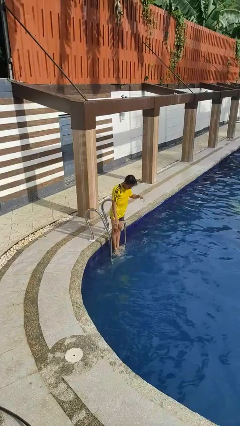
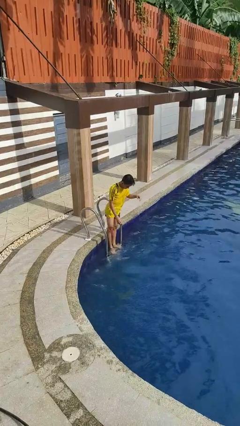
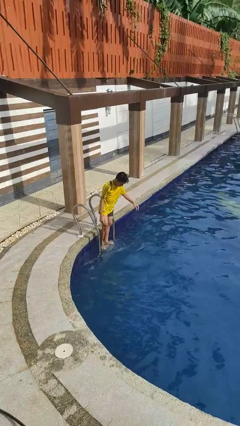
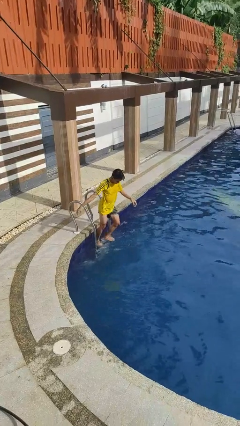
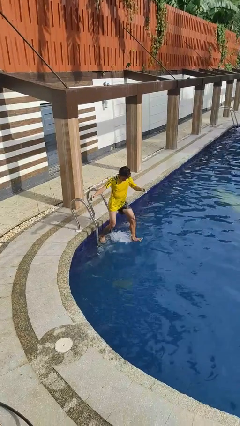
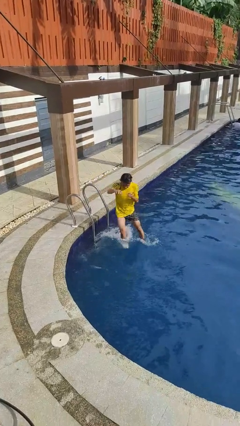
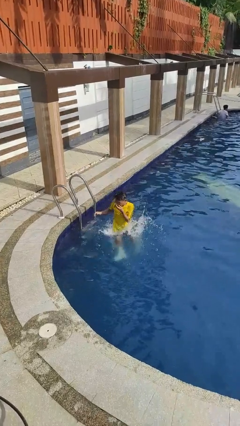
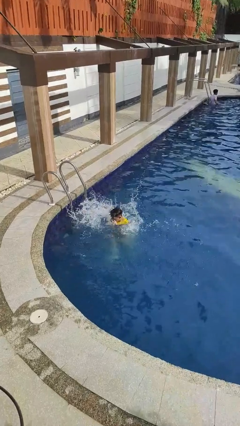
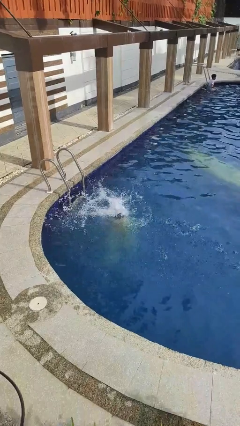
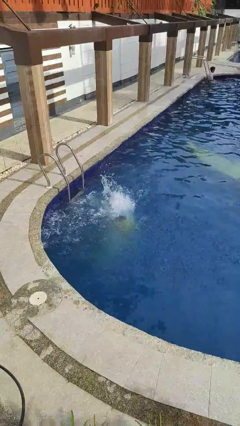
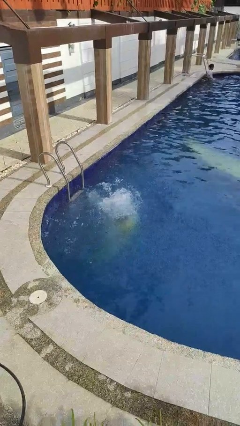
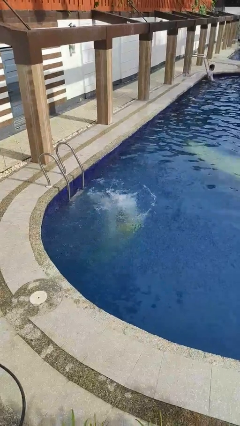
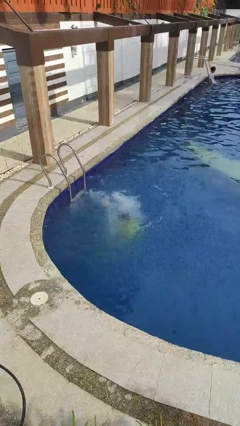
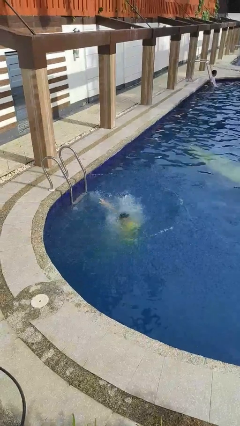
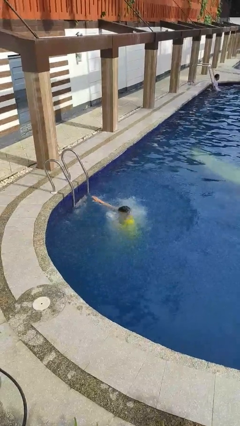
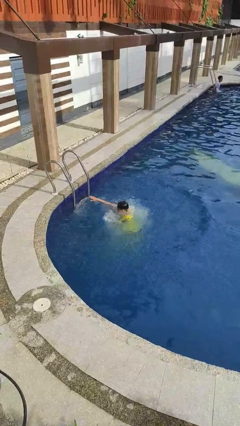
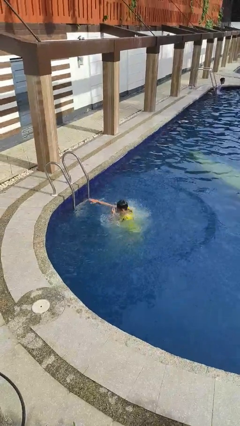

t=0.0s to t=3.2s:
person jumps into pool

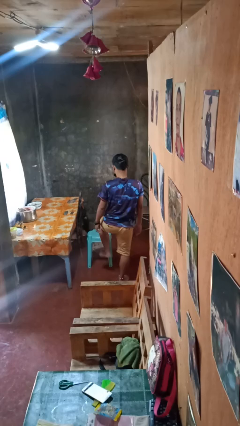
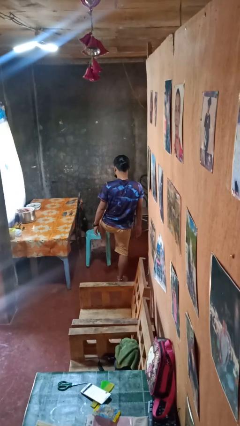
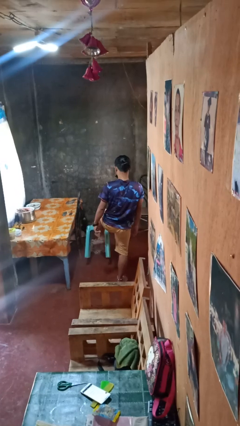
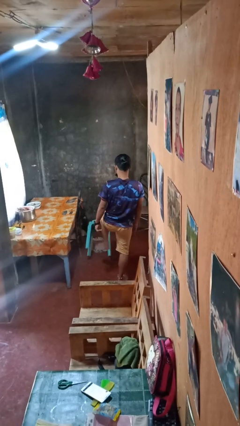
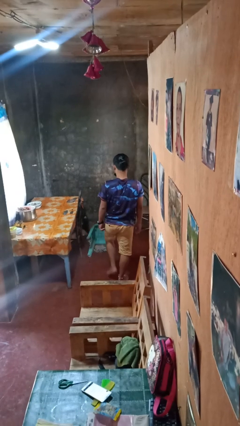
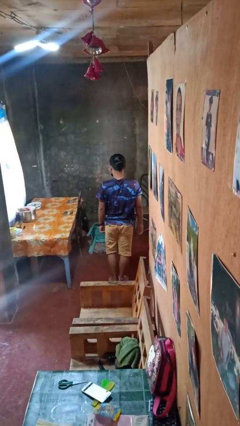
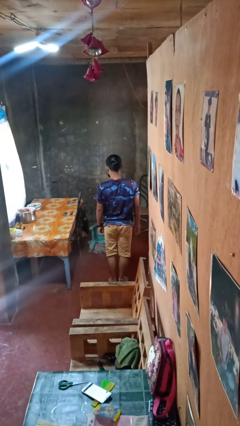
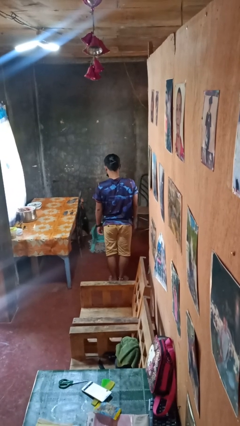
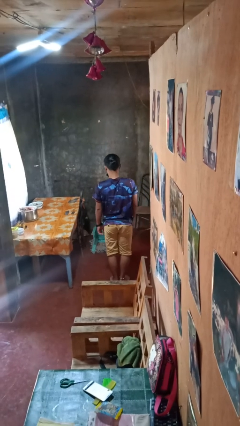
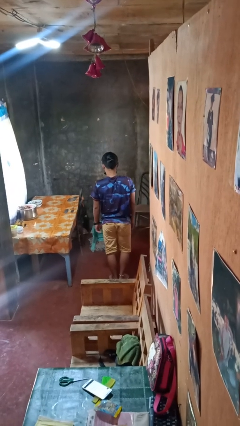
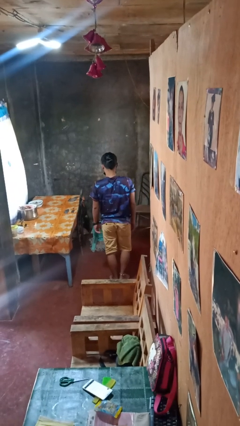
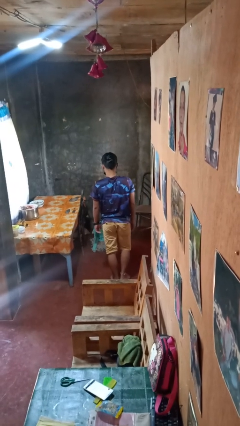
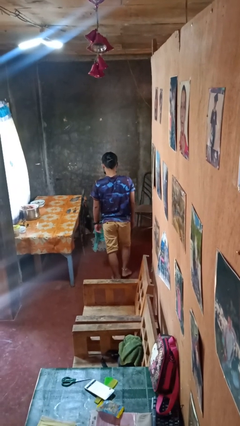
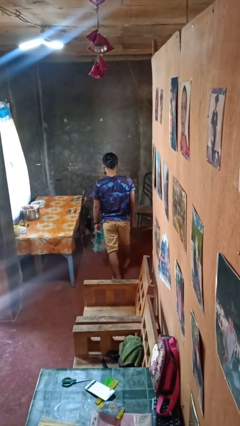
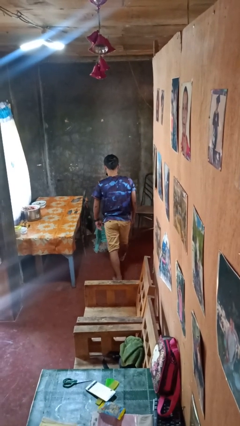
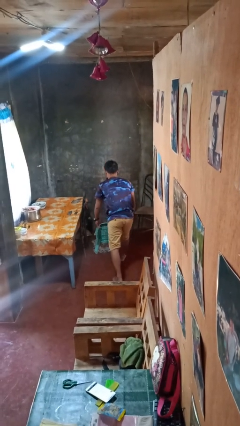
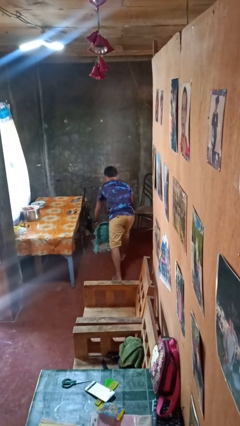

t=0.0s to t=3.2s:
person knocks over furniture

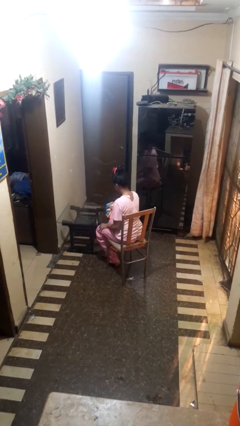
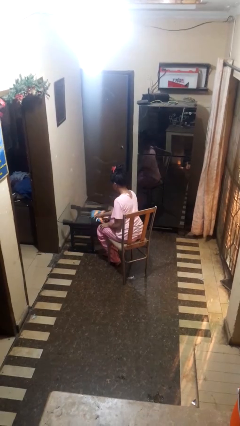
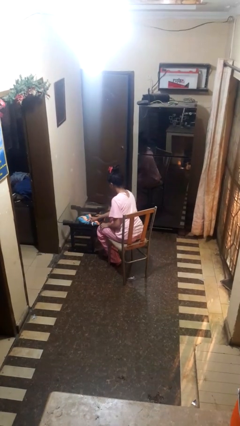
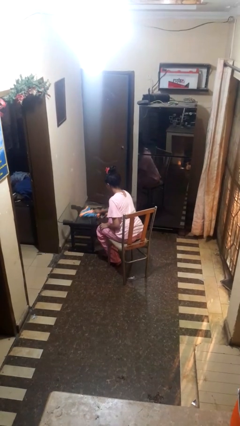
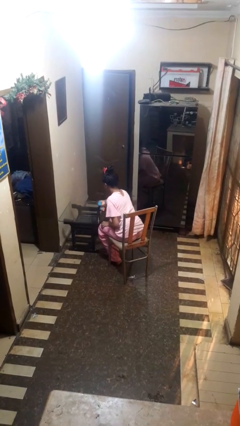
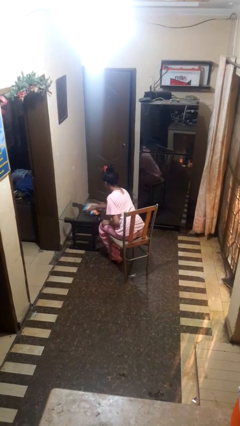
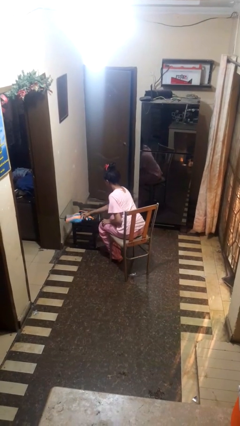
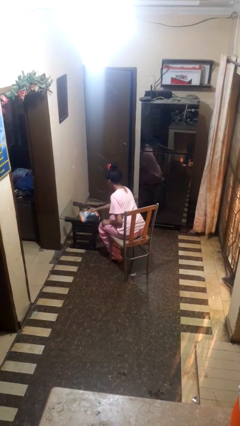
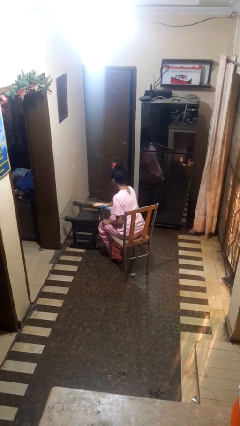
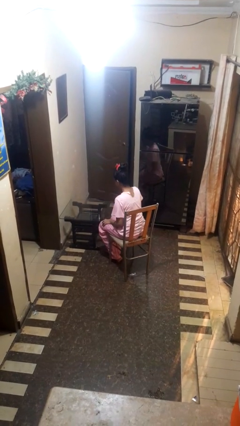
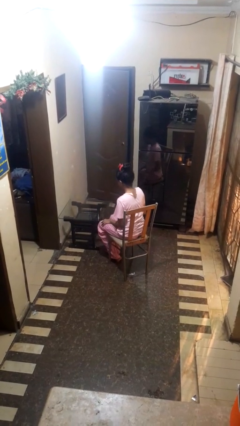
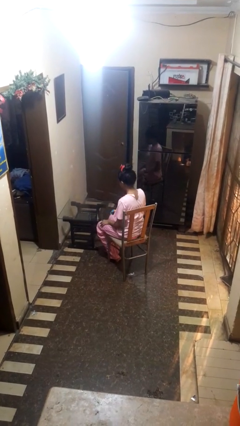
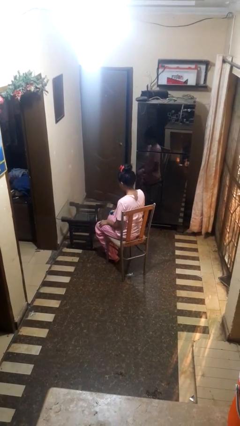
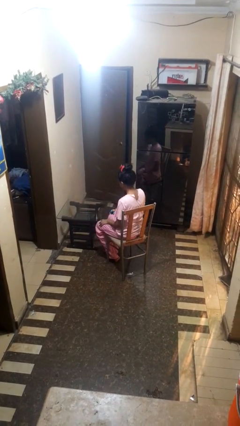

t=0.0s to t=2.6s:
person cleans table with rag

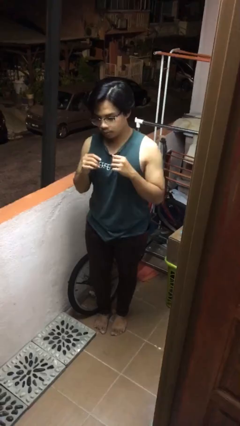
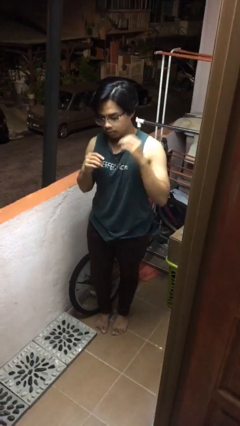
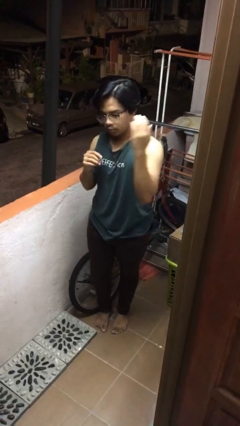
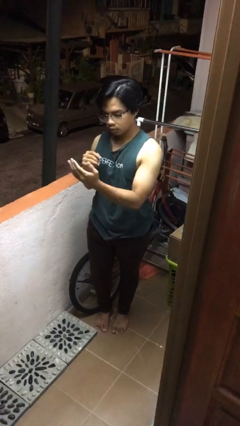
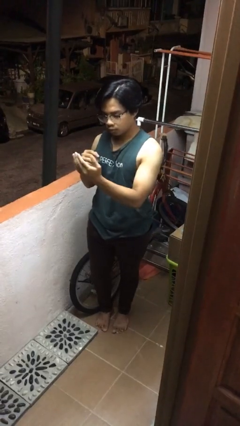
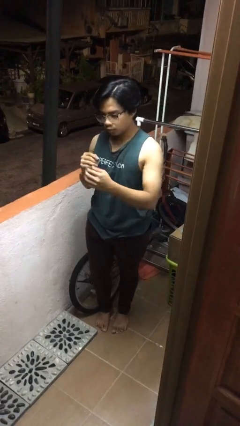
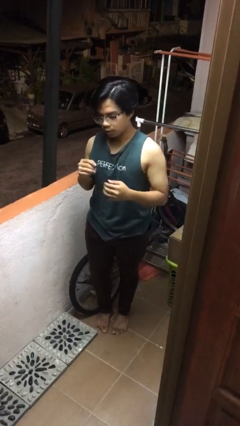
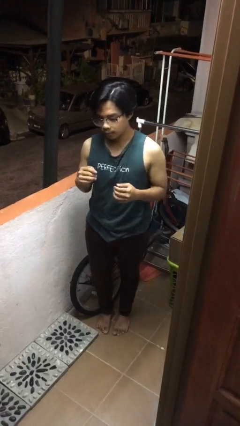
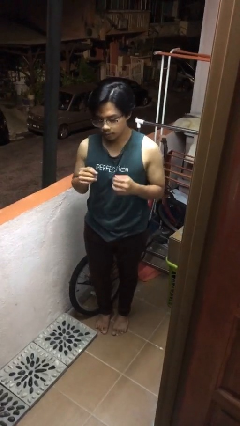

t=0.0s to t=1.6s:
person karate chop

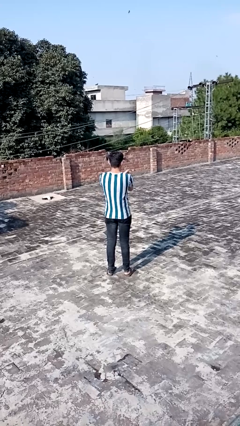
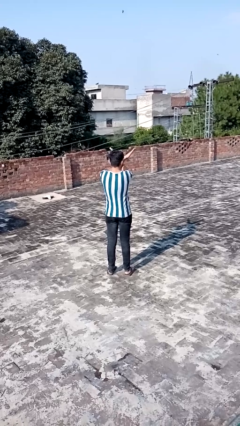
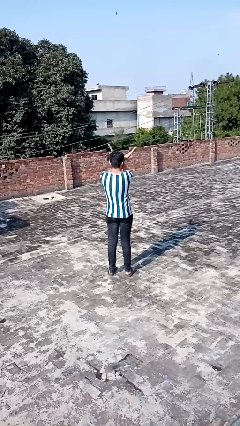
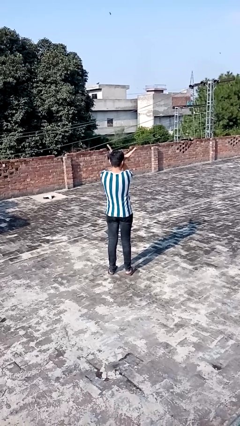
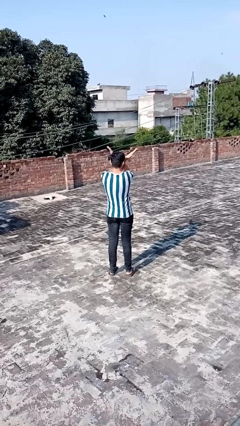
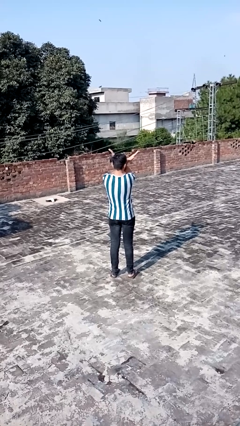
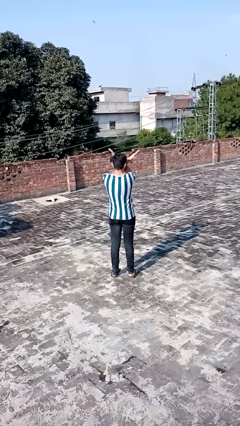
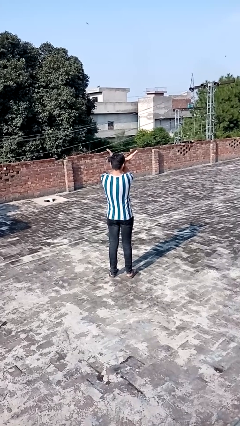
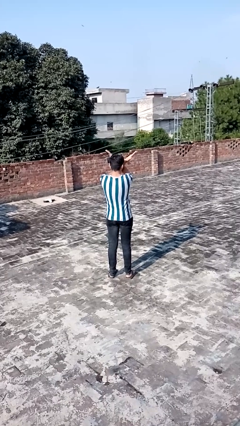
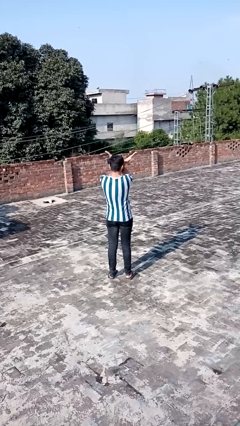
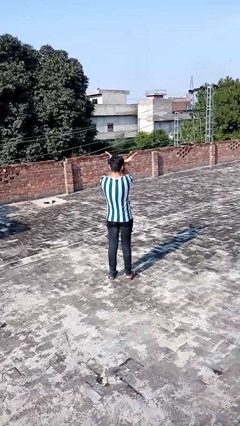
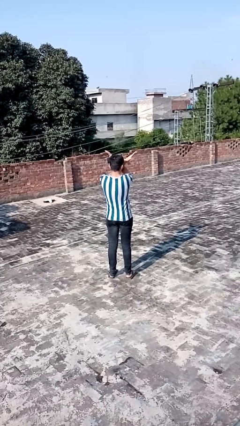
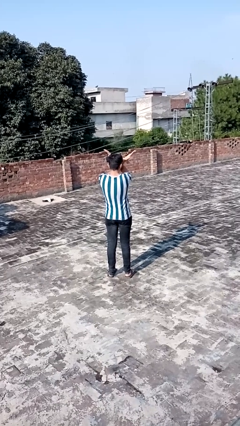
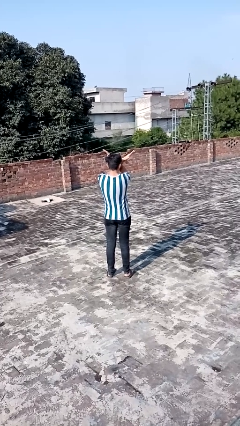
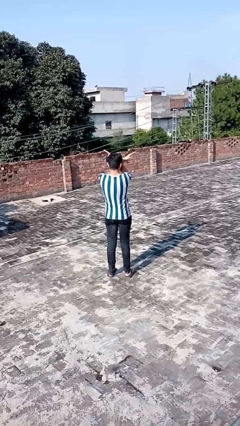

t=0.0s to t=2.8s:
person gestures arms x

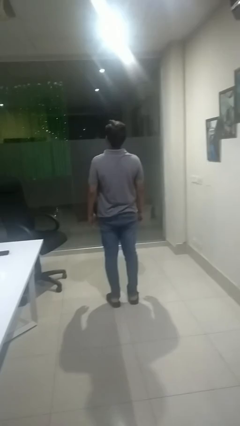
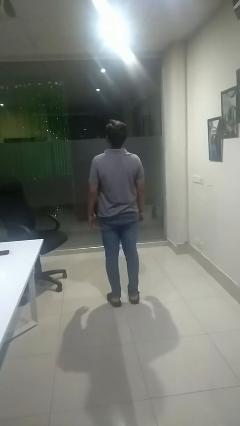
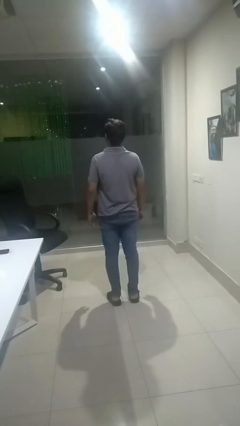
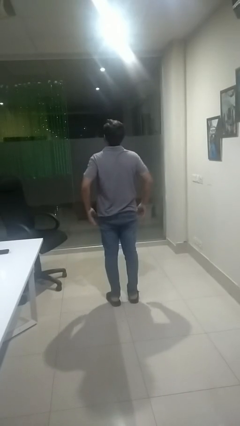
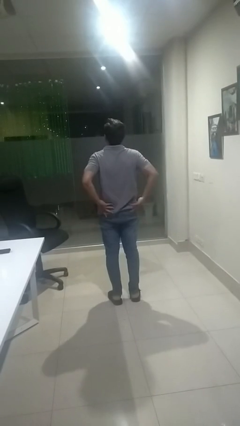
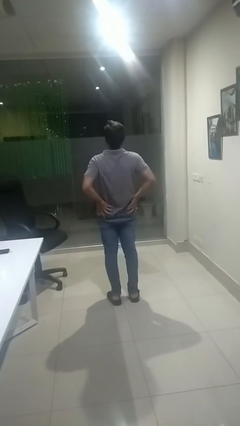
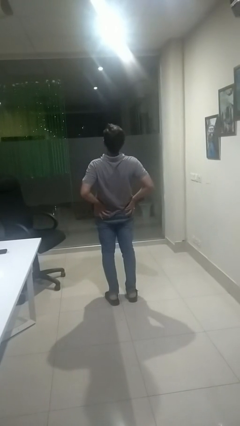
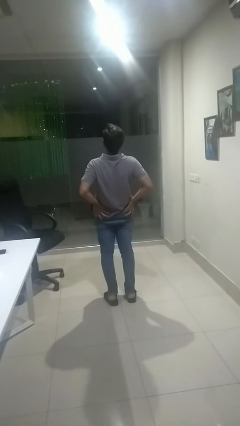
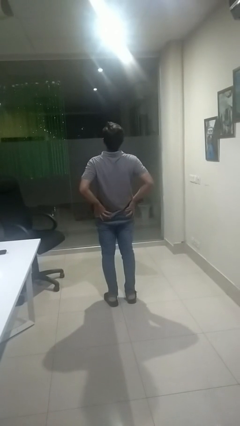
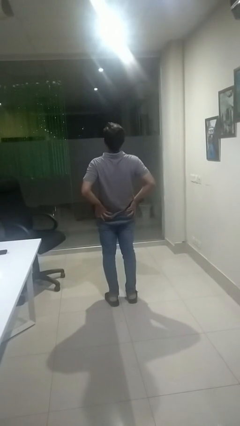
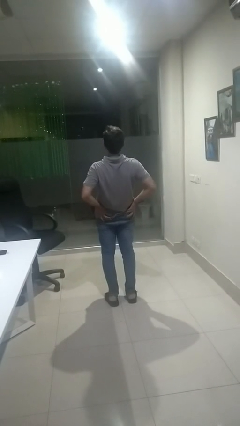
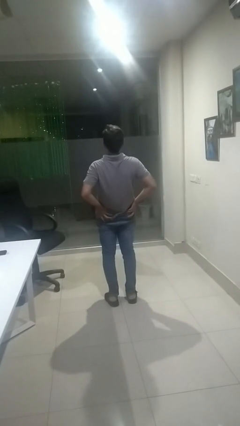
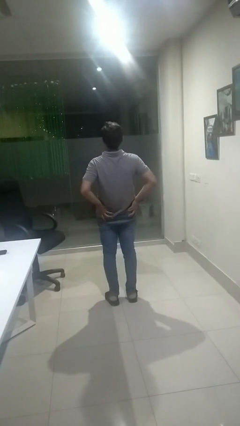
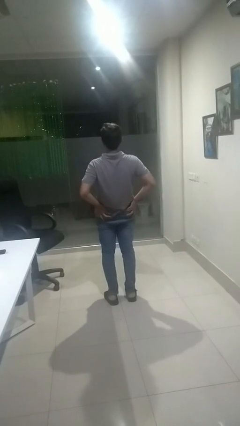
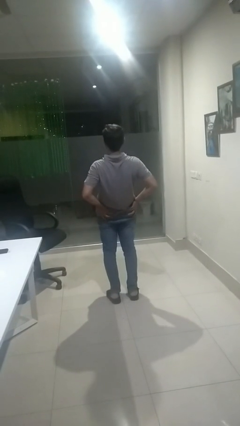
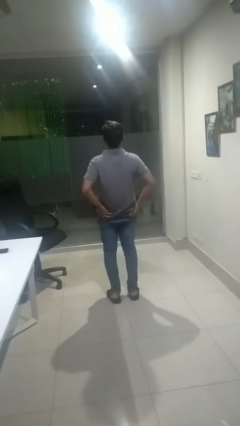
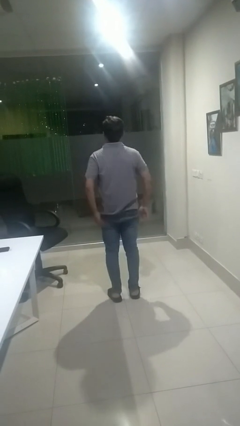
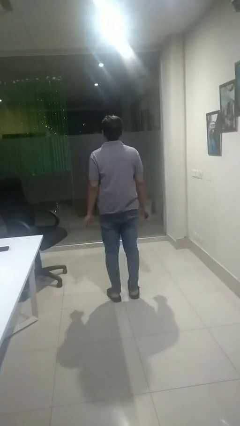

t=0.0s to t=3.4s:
person stretches back

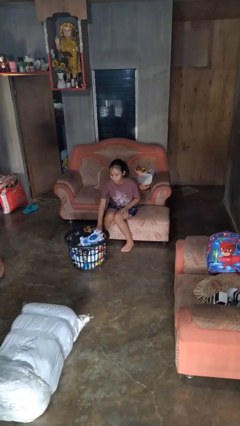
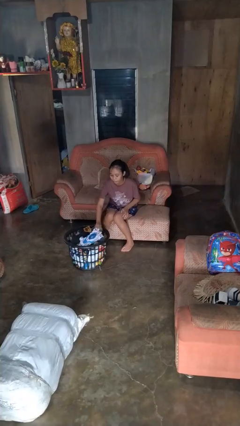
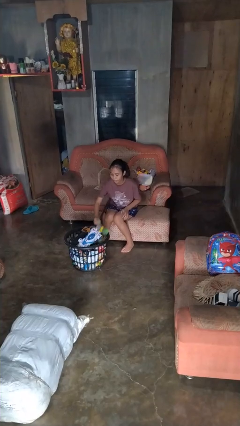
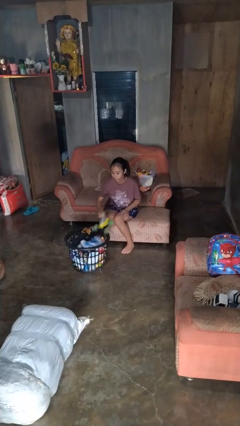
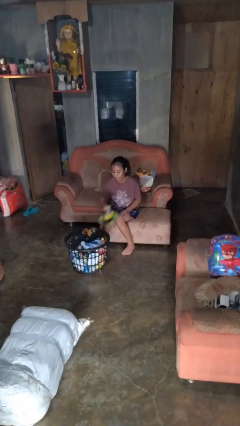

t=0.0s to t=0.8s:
person takes object from basket
